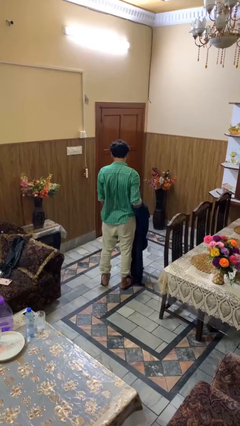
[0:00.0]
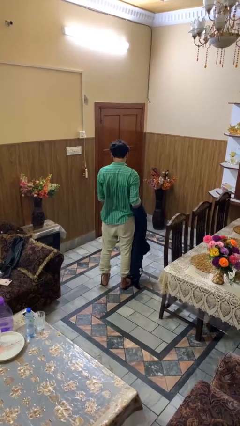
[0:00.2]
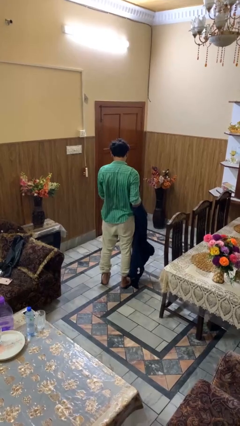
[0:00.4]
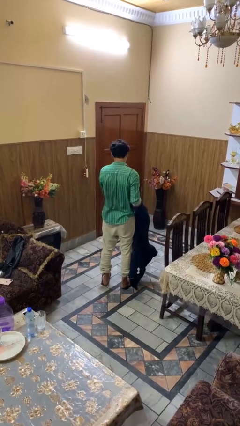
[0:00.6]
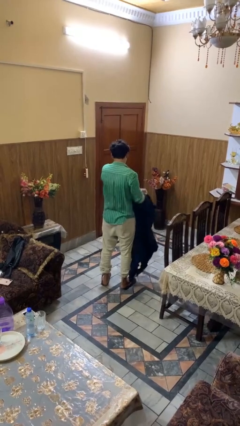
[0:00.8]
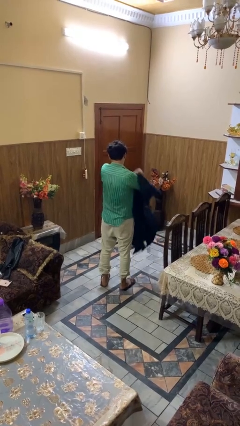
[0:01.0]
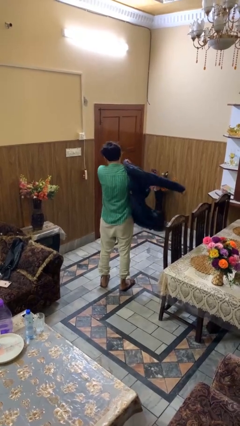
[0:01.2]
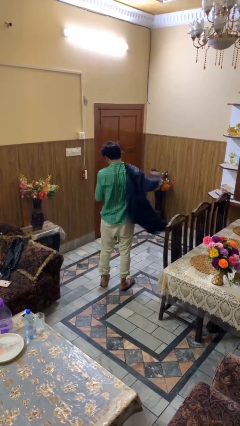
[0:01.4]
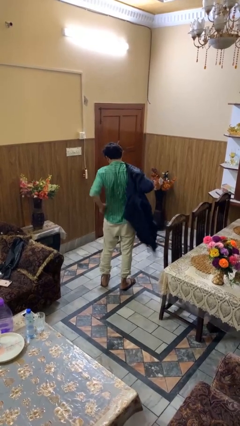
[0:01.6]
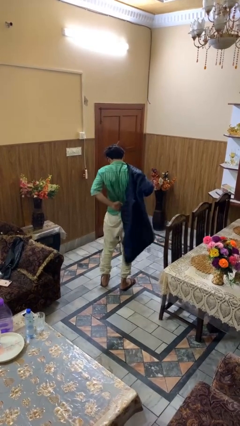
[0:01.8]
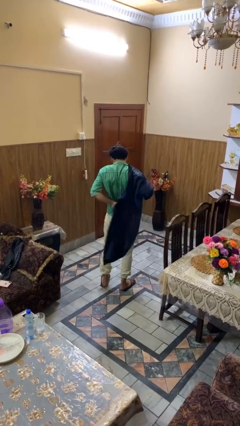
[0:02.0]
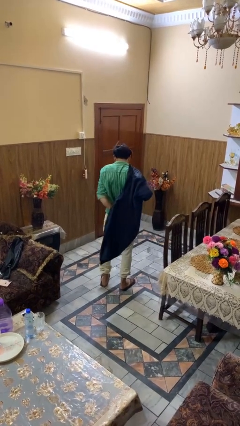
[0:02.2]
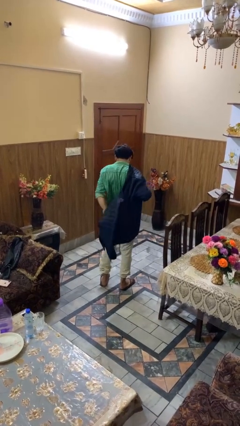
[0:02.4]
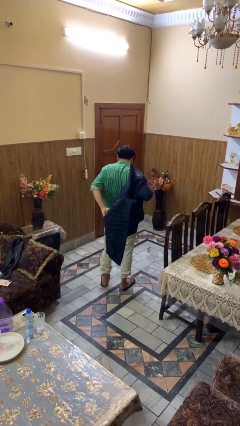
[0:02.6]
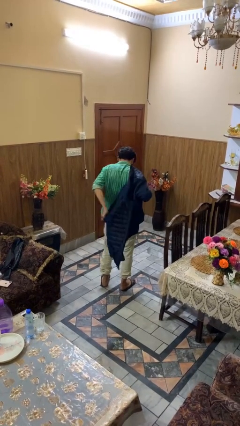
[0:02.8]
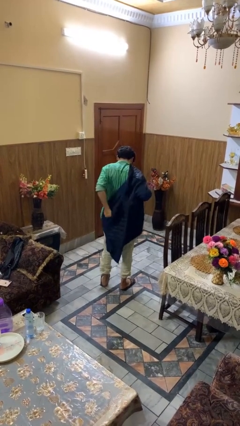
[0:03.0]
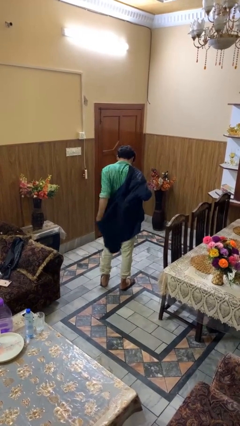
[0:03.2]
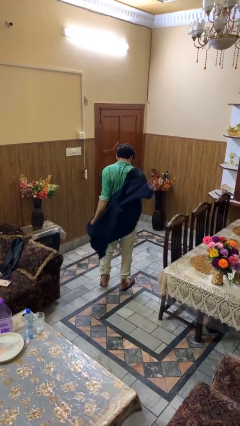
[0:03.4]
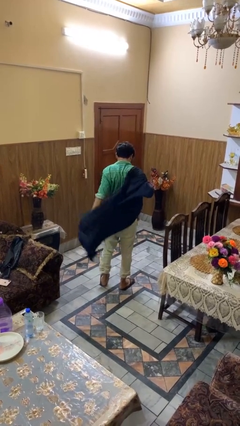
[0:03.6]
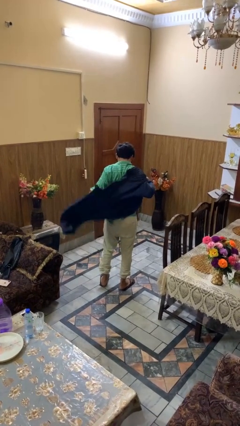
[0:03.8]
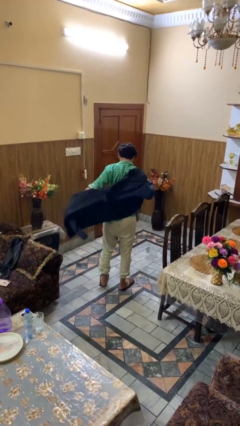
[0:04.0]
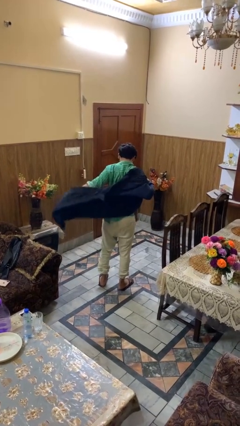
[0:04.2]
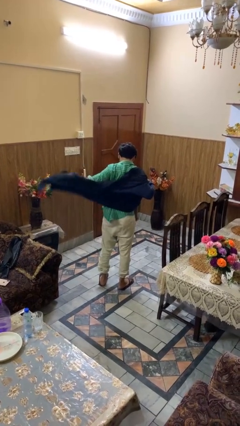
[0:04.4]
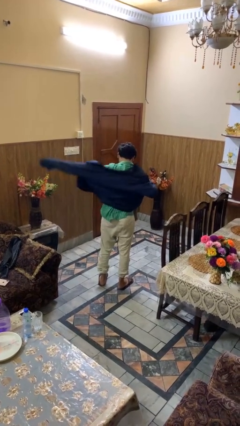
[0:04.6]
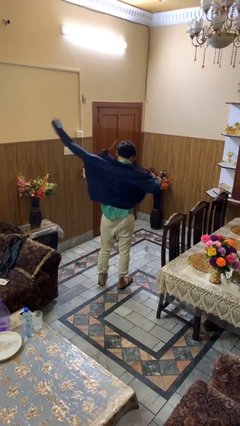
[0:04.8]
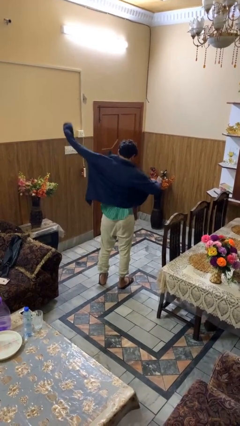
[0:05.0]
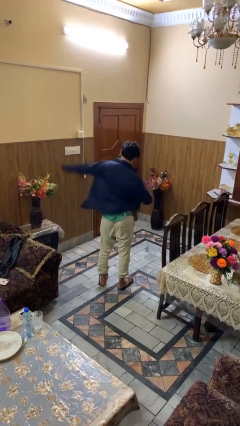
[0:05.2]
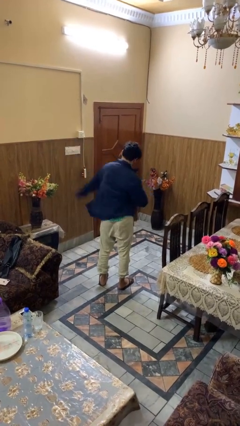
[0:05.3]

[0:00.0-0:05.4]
person puts on jacket

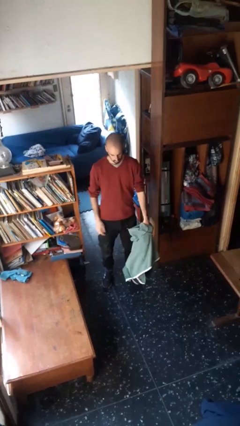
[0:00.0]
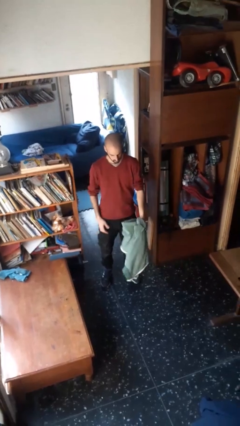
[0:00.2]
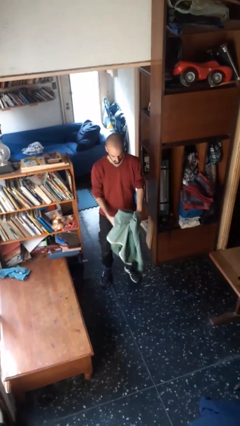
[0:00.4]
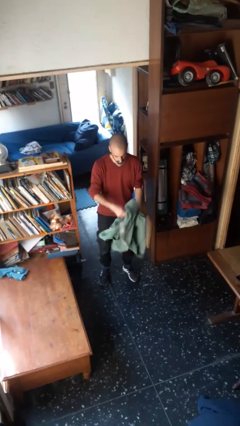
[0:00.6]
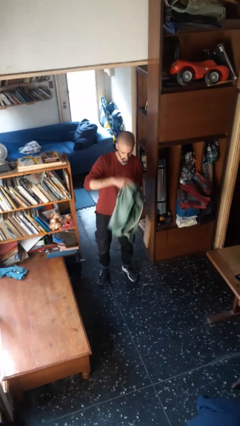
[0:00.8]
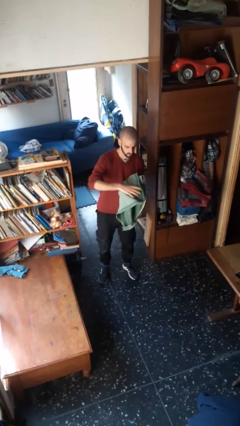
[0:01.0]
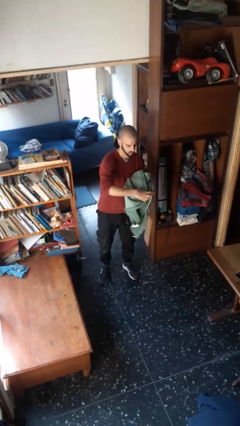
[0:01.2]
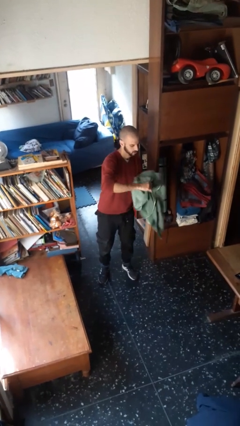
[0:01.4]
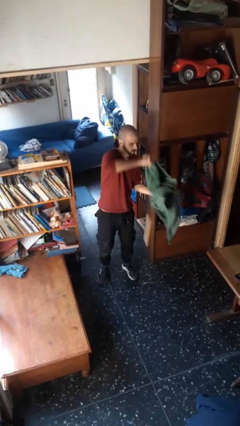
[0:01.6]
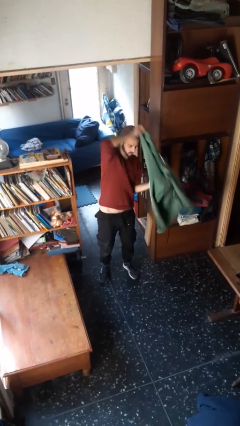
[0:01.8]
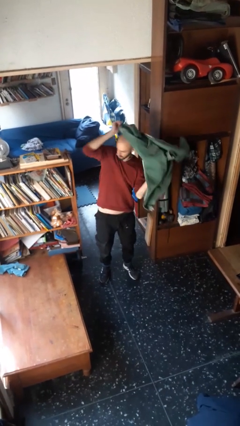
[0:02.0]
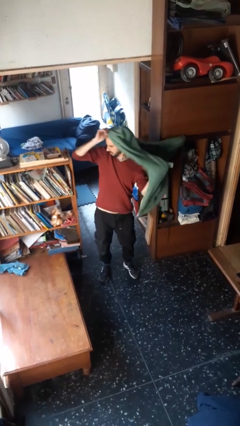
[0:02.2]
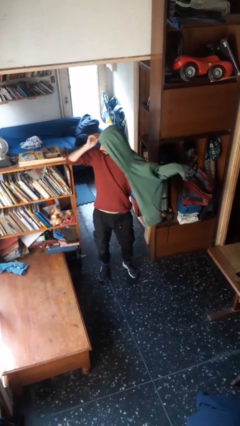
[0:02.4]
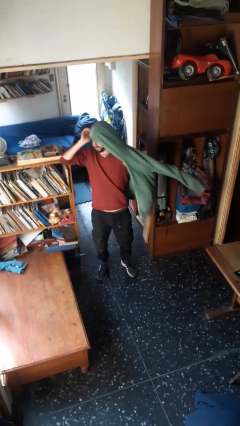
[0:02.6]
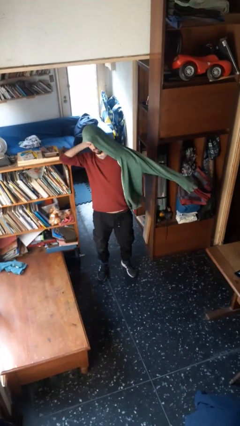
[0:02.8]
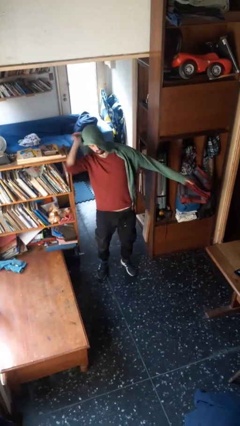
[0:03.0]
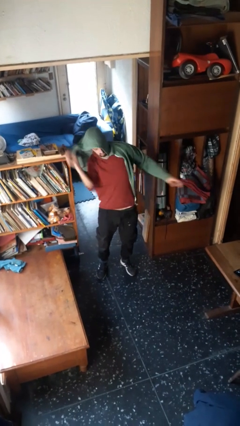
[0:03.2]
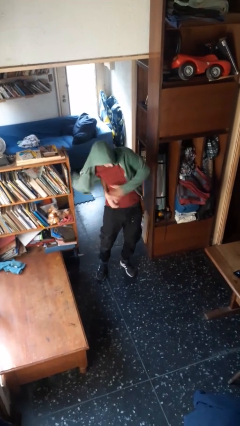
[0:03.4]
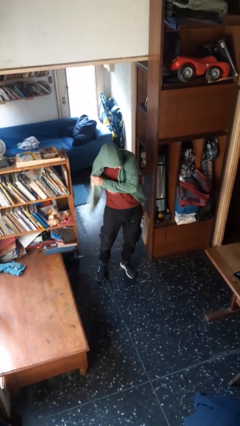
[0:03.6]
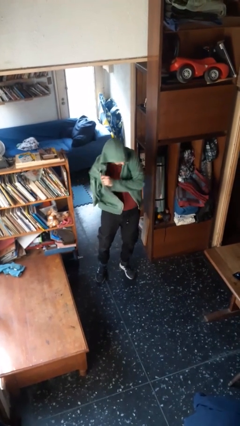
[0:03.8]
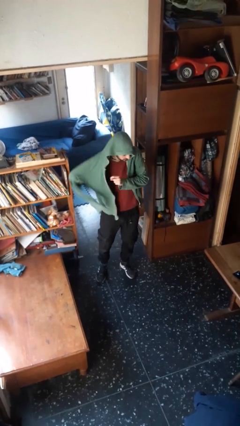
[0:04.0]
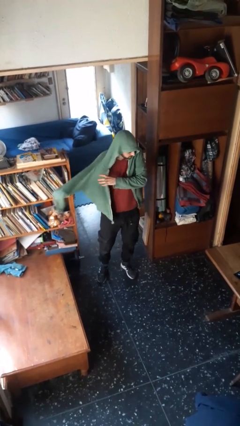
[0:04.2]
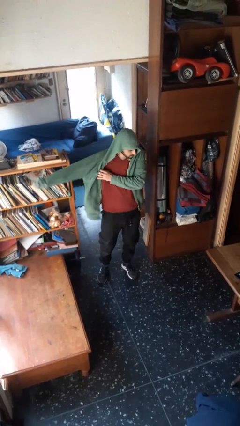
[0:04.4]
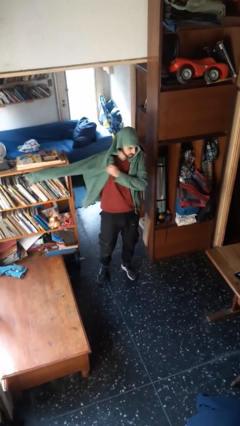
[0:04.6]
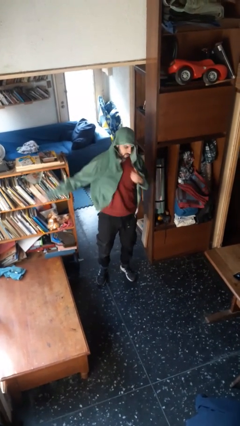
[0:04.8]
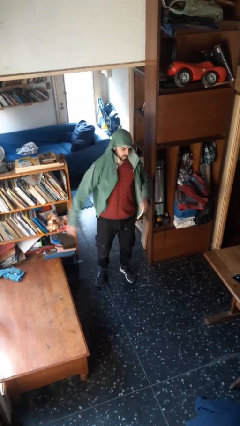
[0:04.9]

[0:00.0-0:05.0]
person puts on hoodie

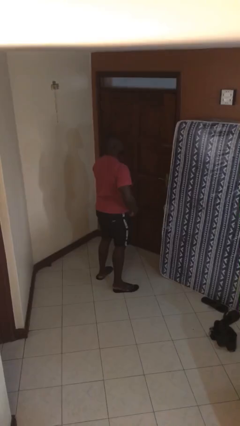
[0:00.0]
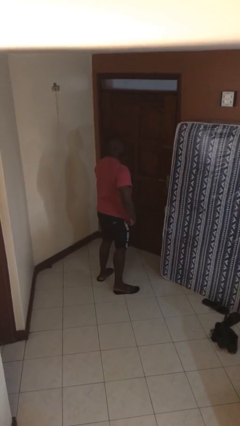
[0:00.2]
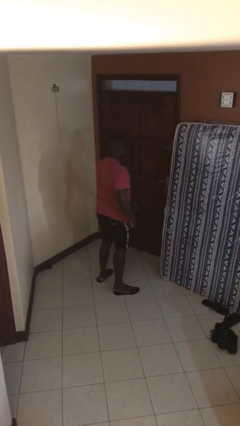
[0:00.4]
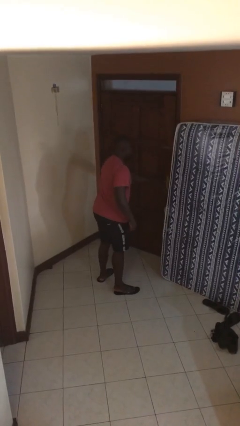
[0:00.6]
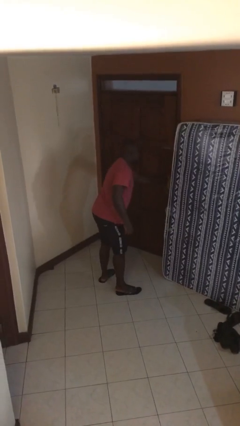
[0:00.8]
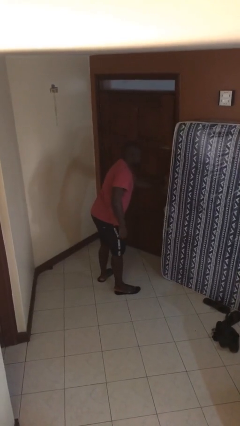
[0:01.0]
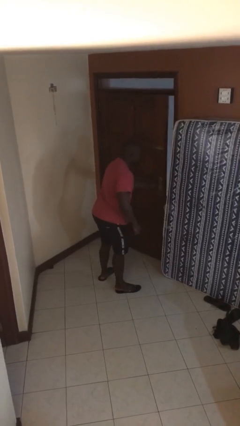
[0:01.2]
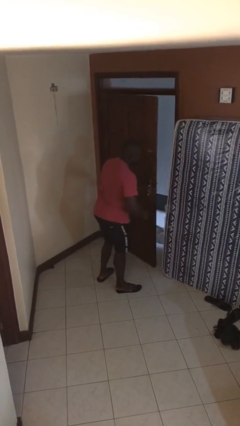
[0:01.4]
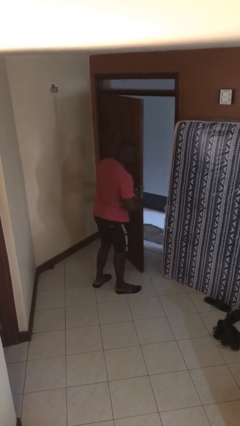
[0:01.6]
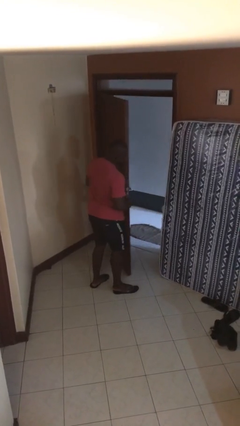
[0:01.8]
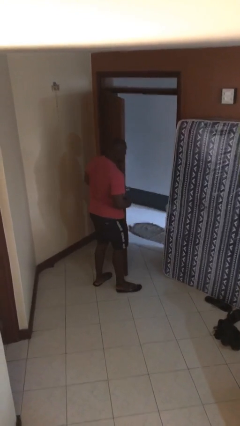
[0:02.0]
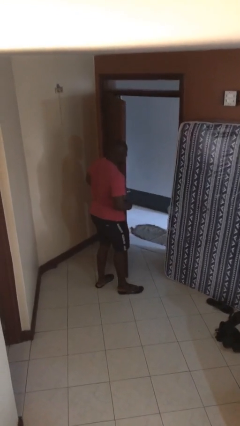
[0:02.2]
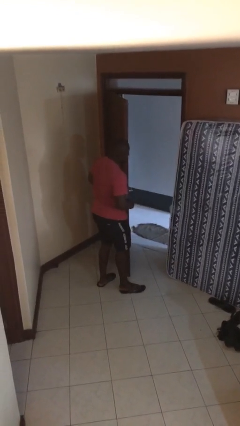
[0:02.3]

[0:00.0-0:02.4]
person opens facility door

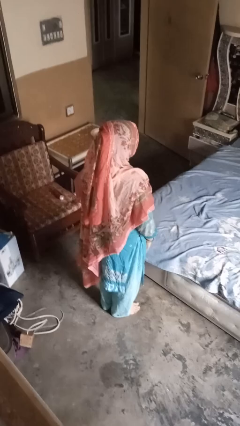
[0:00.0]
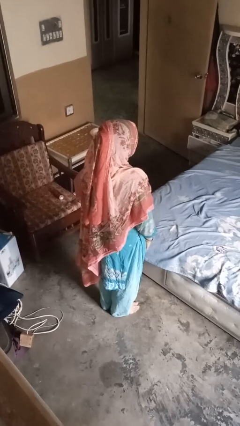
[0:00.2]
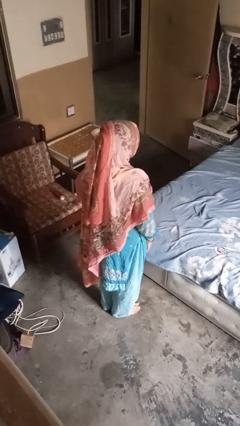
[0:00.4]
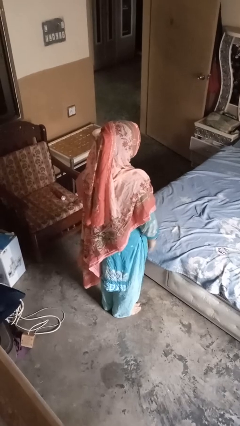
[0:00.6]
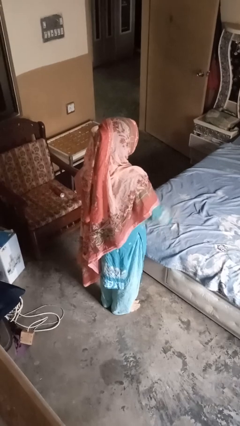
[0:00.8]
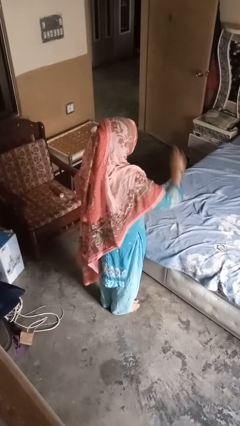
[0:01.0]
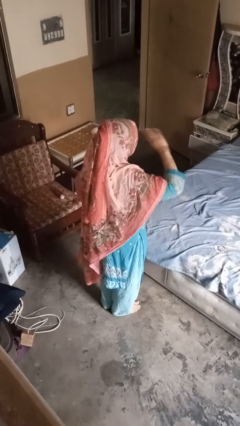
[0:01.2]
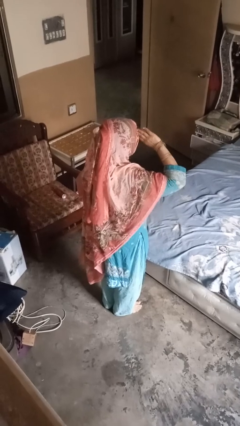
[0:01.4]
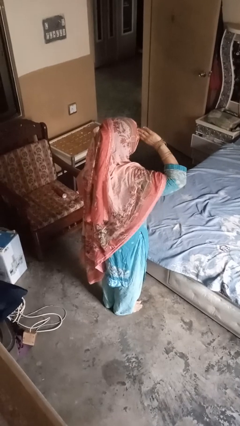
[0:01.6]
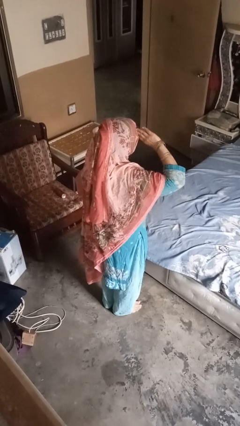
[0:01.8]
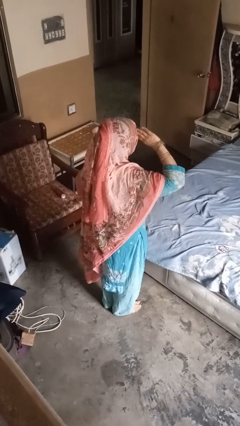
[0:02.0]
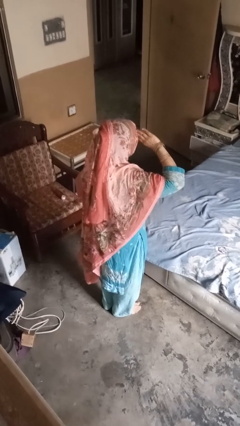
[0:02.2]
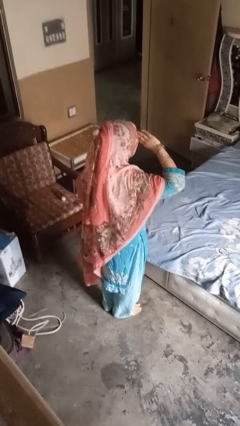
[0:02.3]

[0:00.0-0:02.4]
person salutes

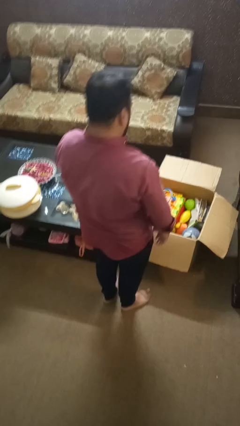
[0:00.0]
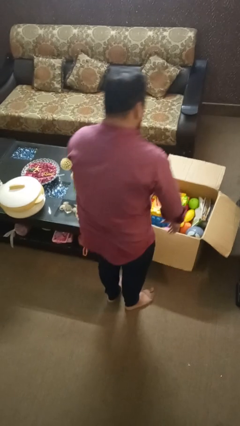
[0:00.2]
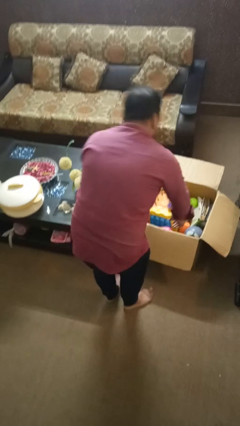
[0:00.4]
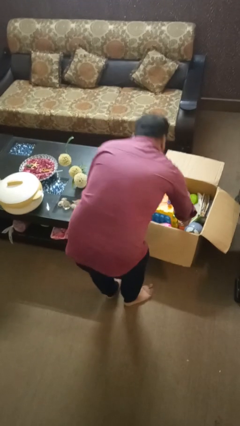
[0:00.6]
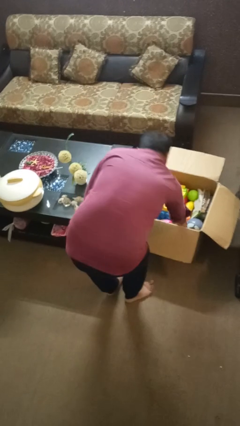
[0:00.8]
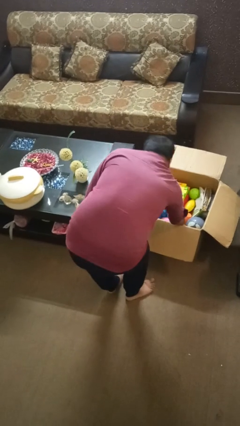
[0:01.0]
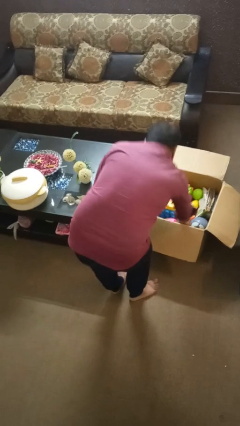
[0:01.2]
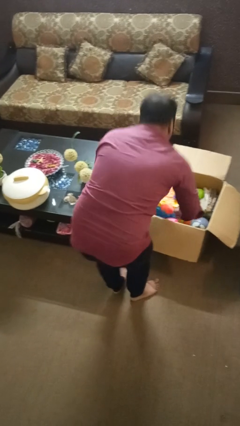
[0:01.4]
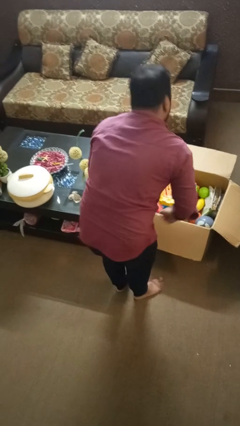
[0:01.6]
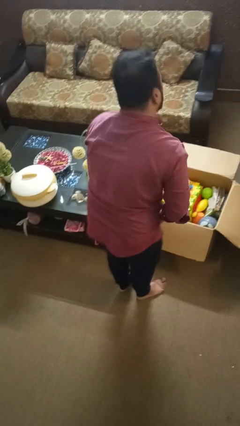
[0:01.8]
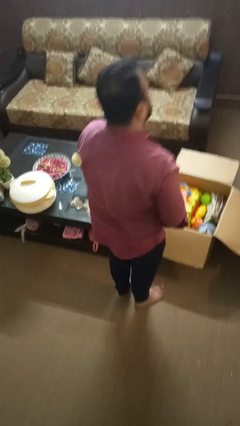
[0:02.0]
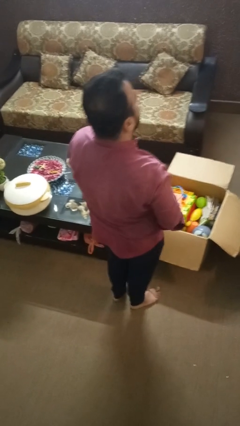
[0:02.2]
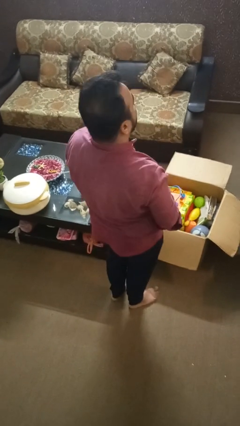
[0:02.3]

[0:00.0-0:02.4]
person takes object from box
